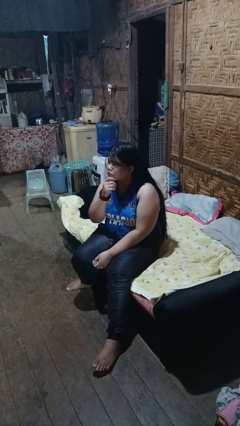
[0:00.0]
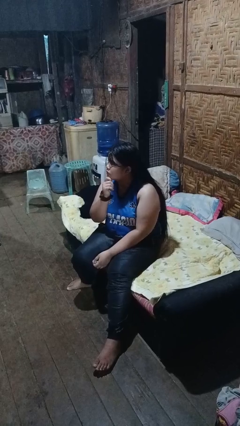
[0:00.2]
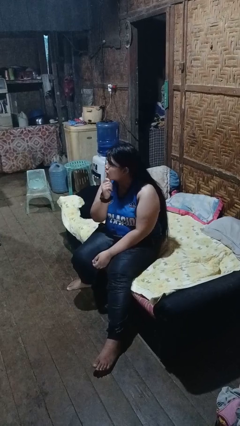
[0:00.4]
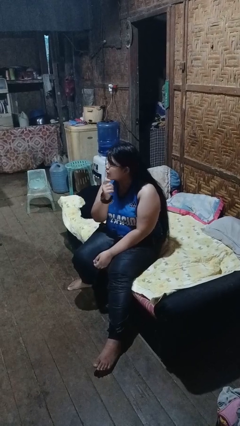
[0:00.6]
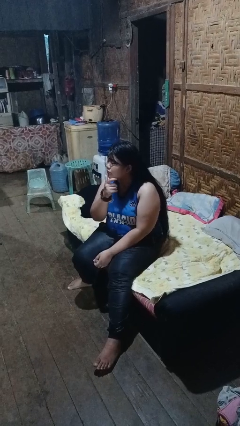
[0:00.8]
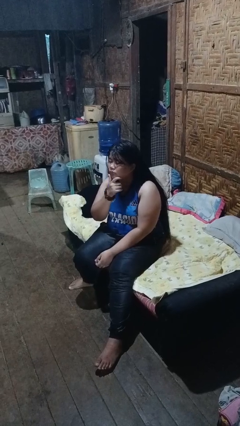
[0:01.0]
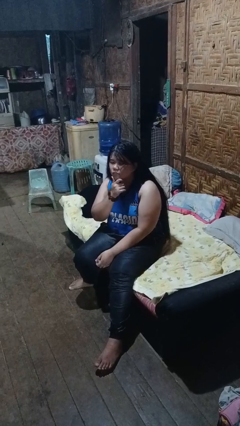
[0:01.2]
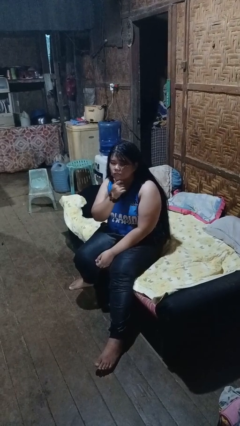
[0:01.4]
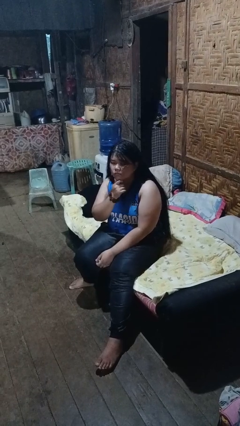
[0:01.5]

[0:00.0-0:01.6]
person strokes chin

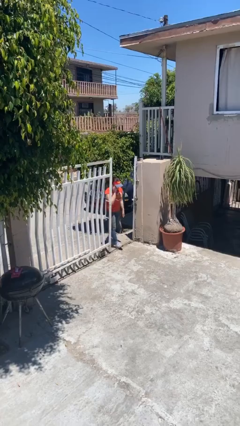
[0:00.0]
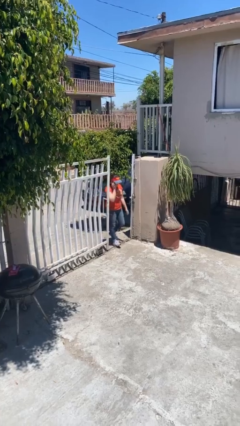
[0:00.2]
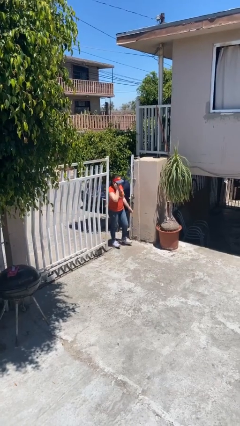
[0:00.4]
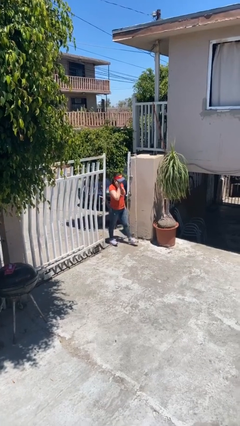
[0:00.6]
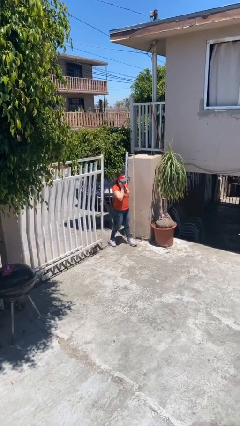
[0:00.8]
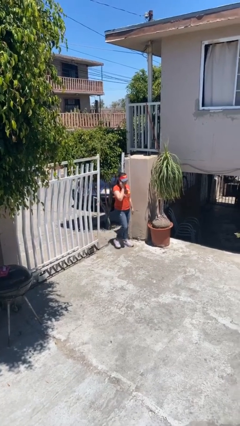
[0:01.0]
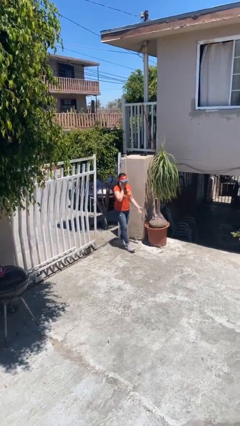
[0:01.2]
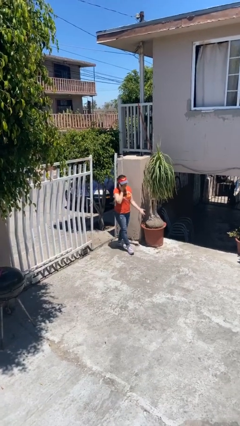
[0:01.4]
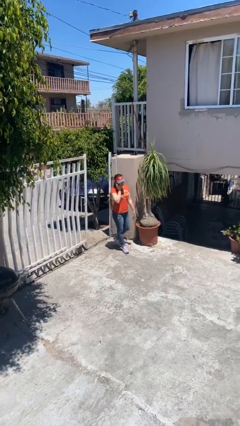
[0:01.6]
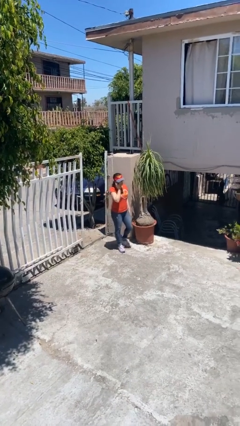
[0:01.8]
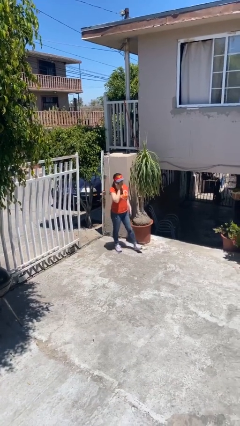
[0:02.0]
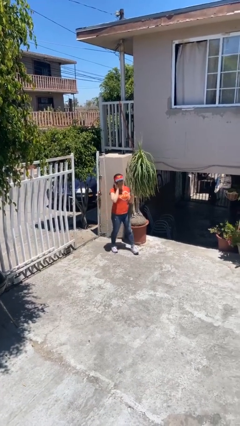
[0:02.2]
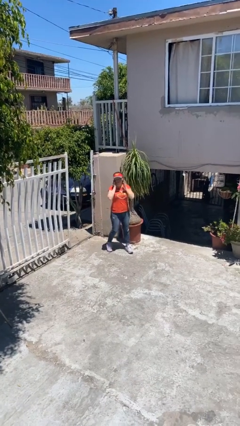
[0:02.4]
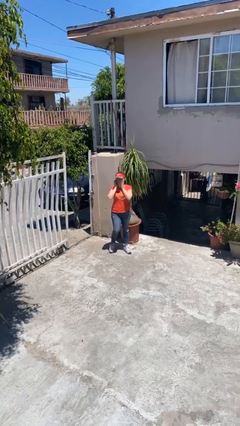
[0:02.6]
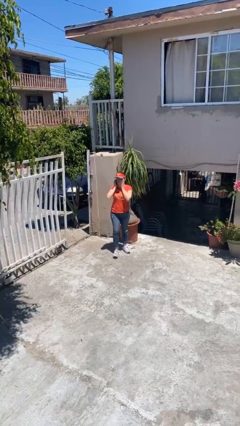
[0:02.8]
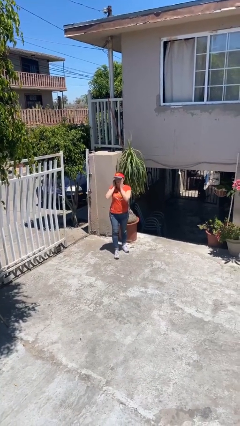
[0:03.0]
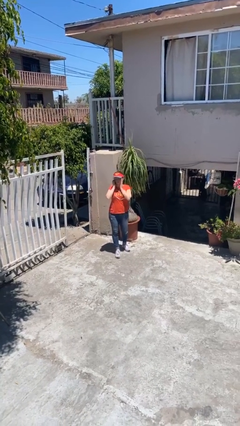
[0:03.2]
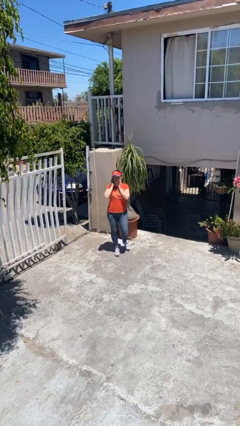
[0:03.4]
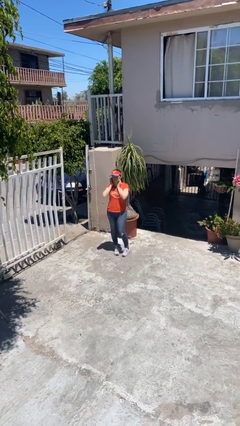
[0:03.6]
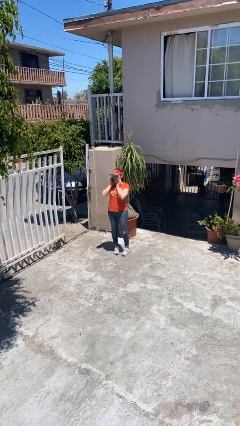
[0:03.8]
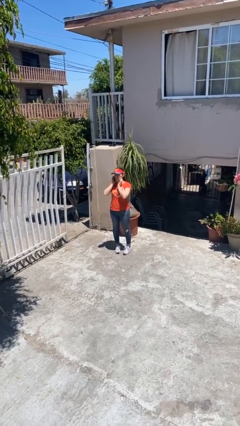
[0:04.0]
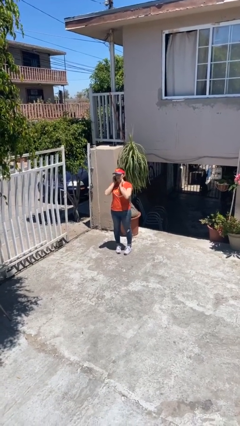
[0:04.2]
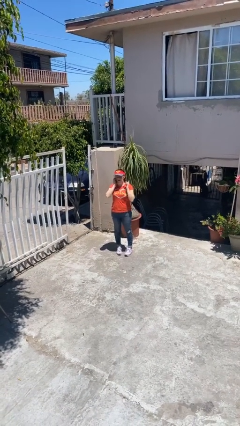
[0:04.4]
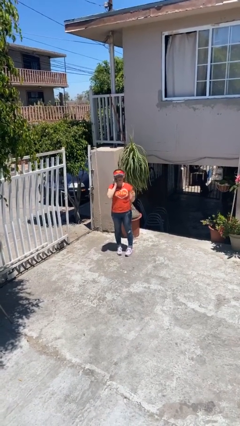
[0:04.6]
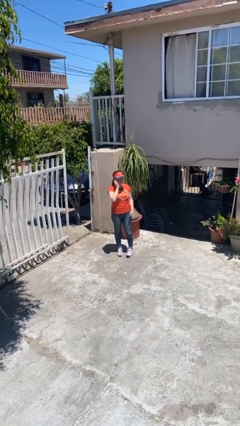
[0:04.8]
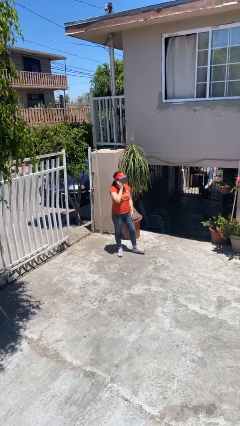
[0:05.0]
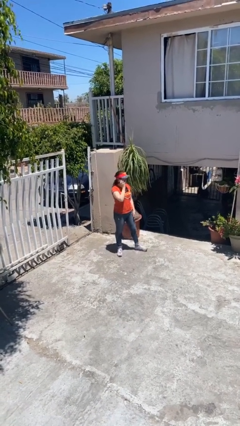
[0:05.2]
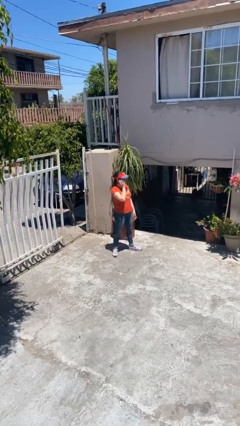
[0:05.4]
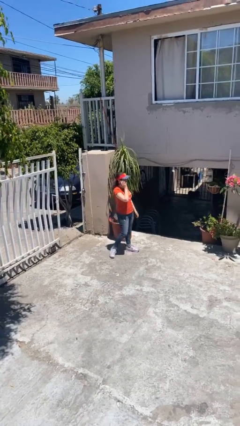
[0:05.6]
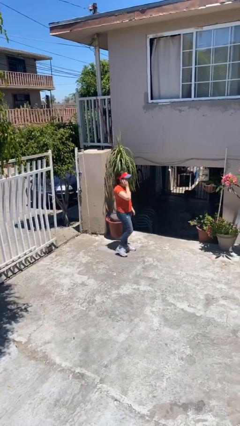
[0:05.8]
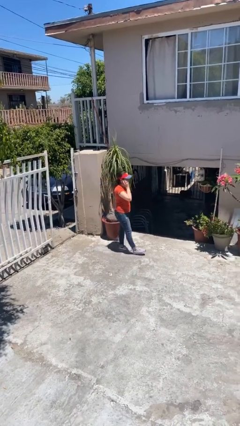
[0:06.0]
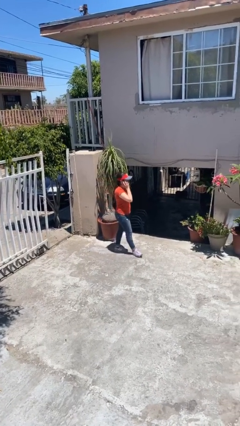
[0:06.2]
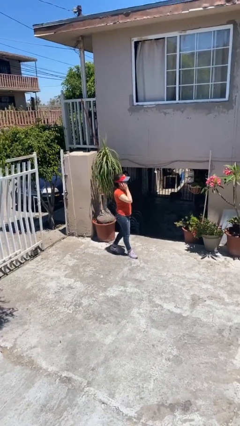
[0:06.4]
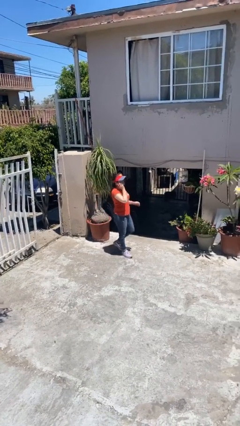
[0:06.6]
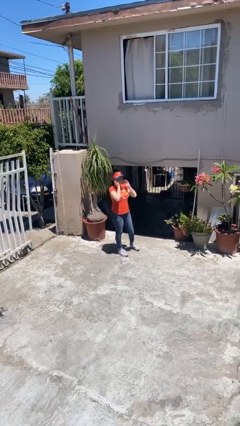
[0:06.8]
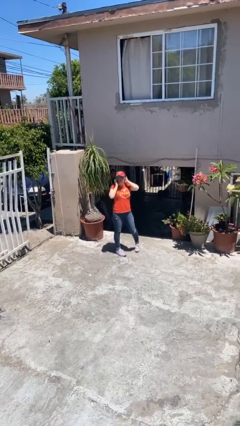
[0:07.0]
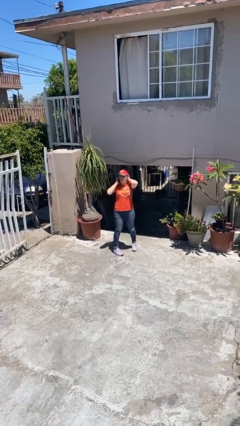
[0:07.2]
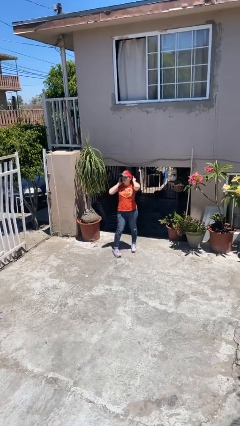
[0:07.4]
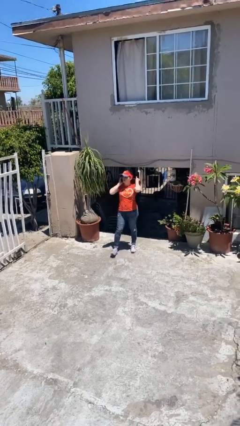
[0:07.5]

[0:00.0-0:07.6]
person enters scene through structure

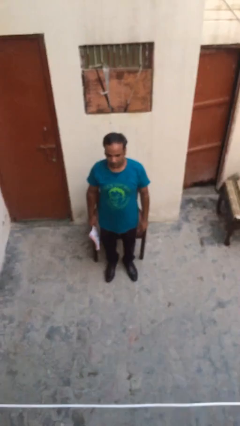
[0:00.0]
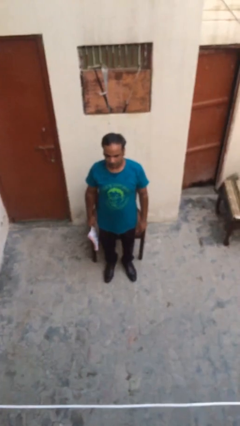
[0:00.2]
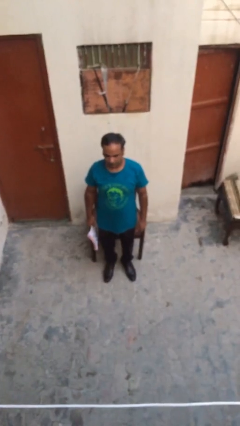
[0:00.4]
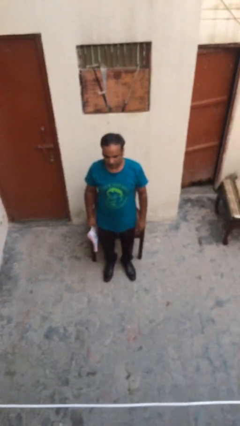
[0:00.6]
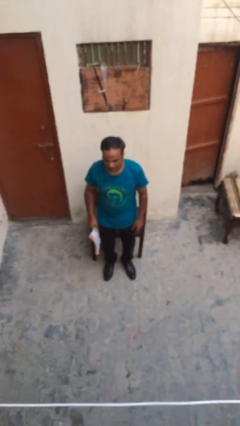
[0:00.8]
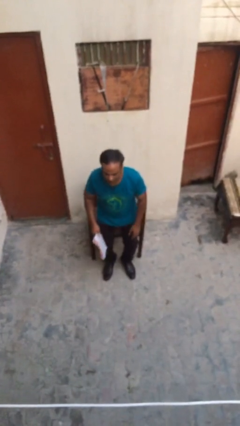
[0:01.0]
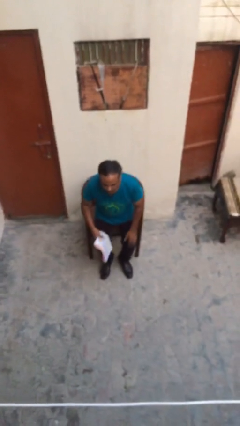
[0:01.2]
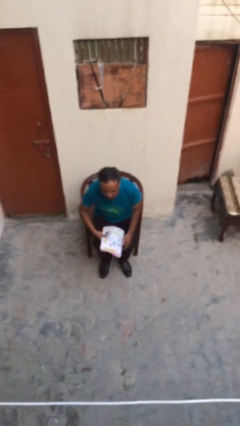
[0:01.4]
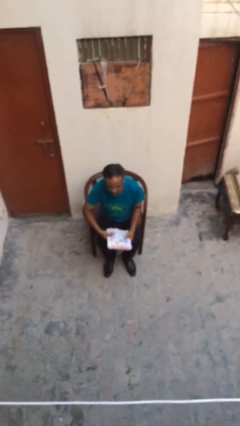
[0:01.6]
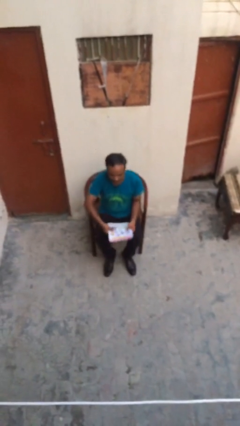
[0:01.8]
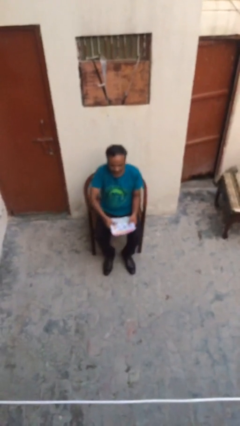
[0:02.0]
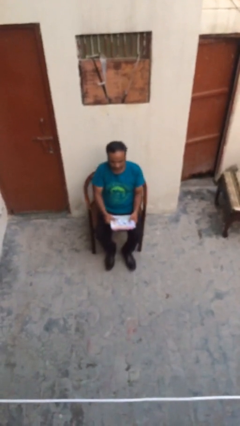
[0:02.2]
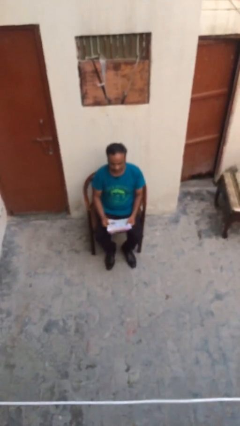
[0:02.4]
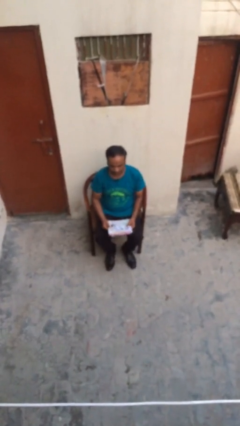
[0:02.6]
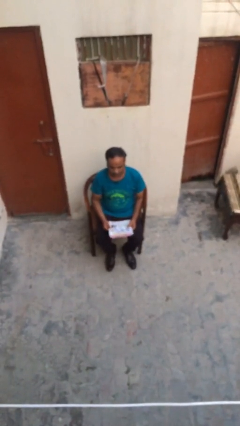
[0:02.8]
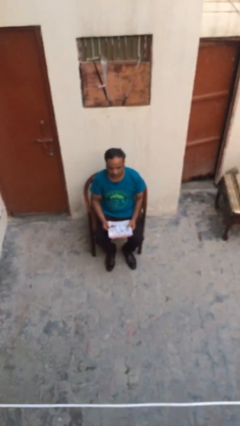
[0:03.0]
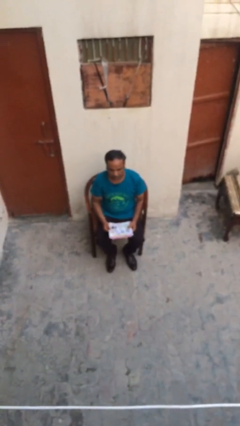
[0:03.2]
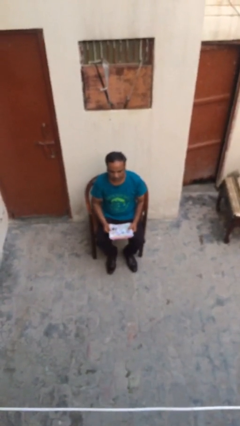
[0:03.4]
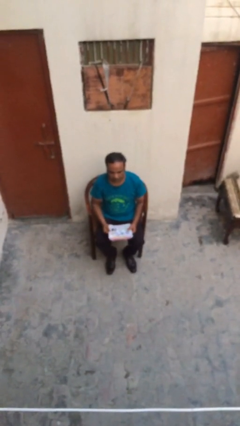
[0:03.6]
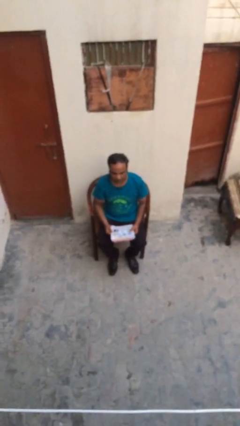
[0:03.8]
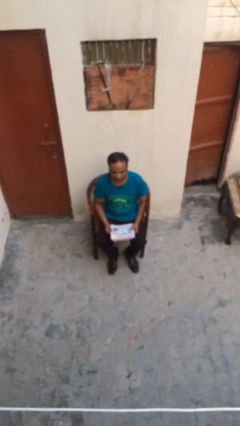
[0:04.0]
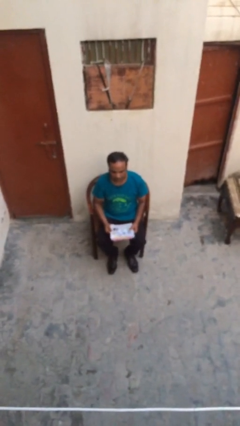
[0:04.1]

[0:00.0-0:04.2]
person sits down

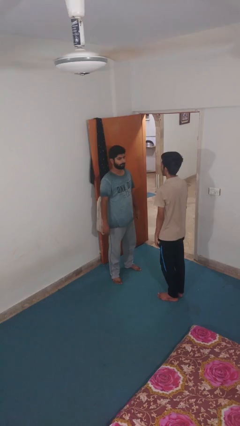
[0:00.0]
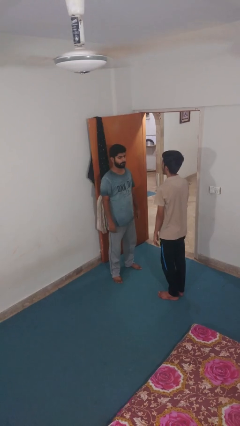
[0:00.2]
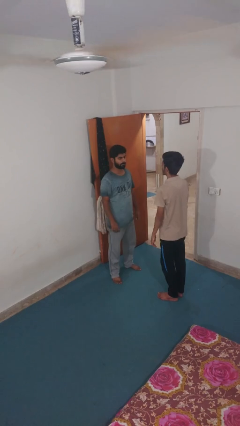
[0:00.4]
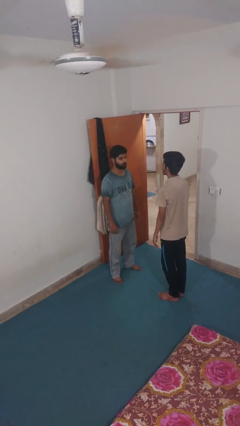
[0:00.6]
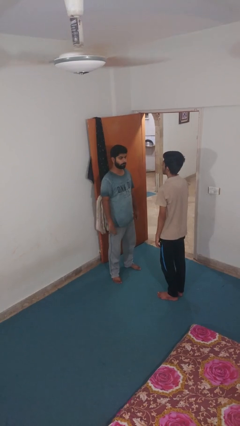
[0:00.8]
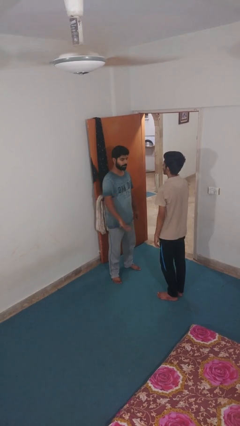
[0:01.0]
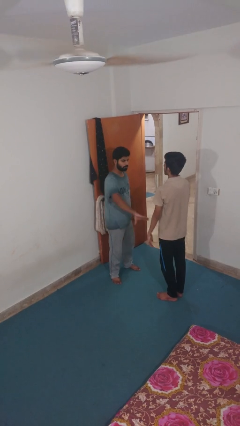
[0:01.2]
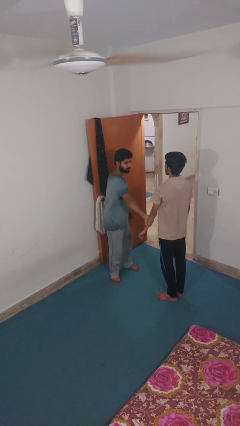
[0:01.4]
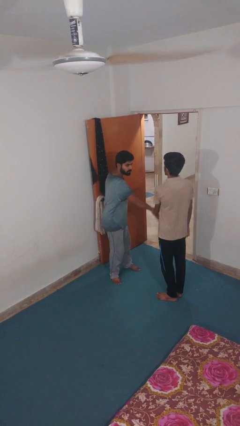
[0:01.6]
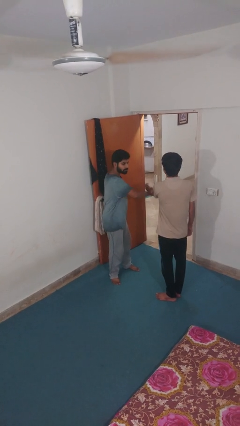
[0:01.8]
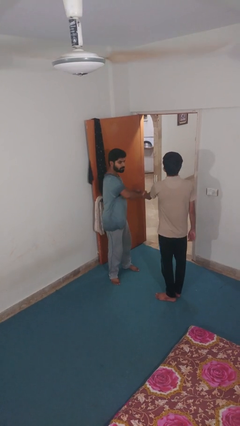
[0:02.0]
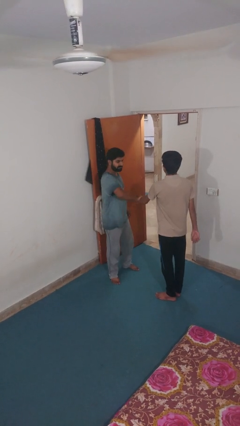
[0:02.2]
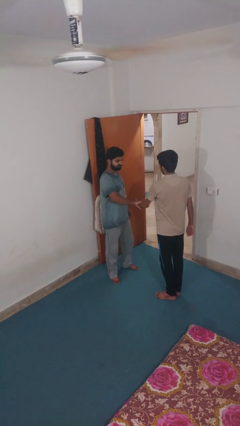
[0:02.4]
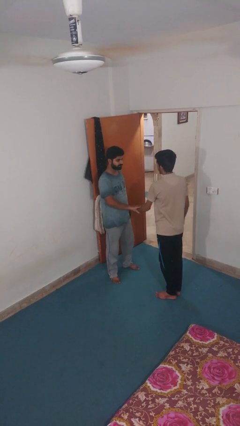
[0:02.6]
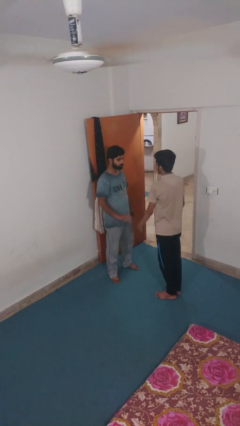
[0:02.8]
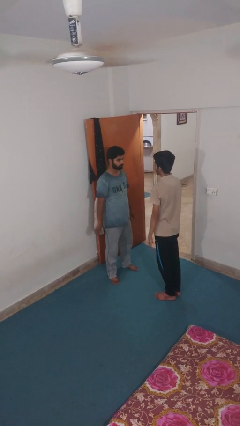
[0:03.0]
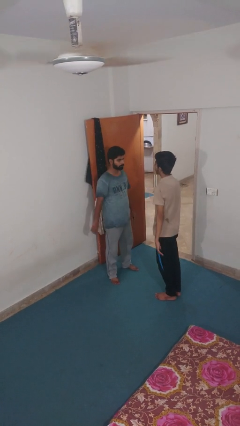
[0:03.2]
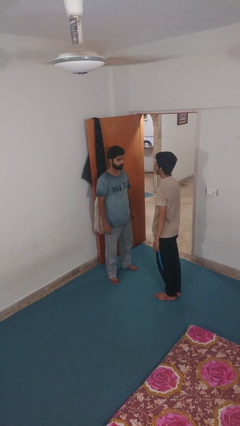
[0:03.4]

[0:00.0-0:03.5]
person grabs person by forearm

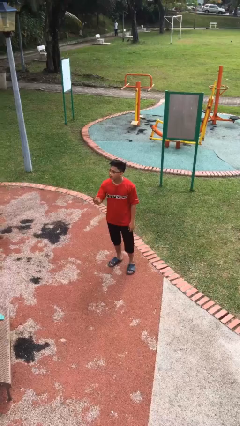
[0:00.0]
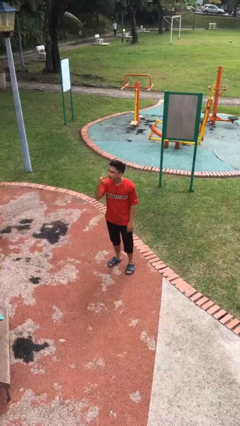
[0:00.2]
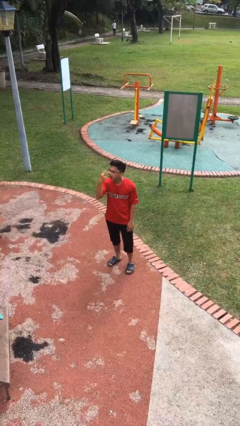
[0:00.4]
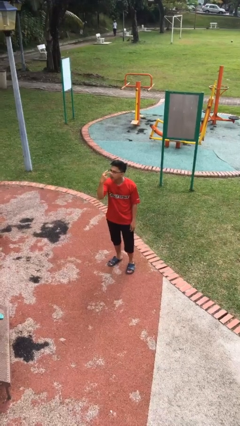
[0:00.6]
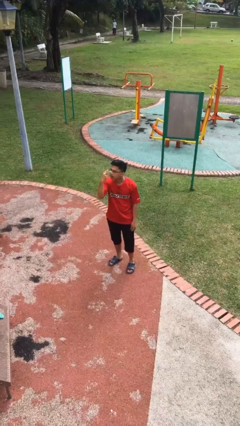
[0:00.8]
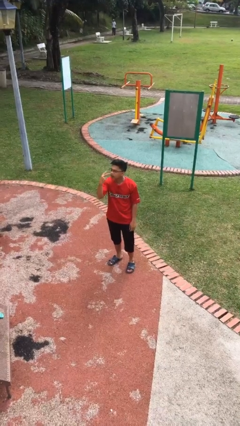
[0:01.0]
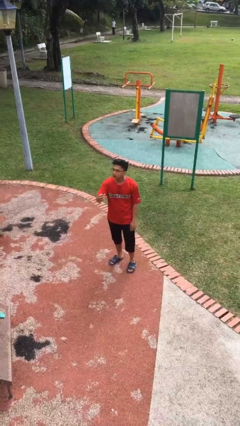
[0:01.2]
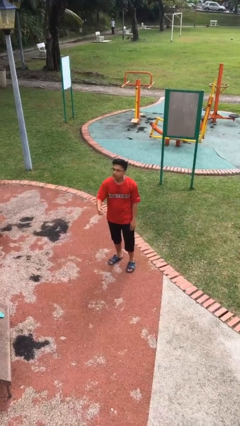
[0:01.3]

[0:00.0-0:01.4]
person gestures watch closely
